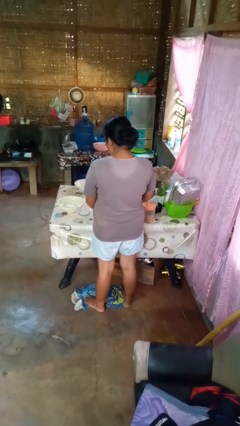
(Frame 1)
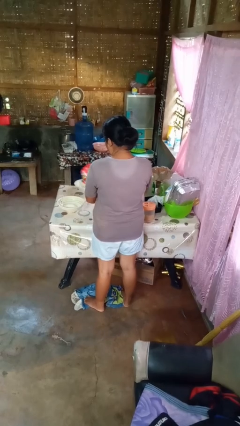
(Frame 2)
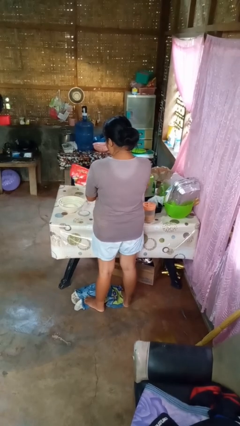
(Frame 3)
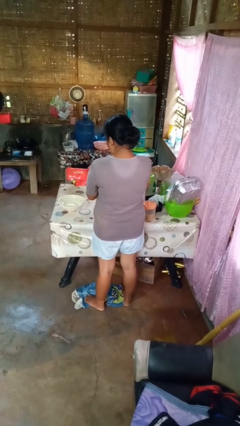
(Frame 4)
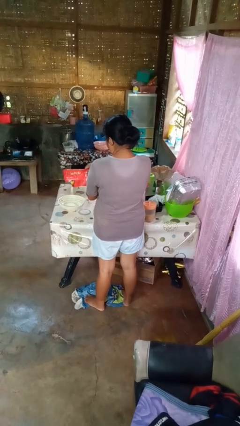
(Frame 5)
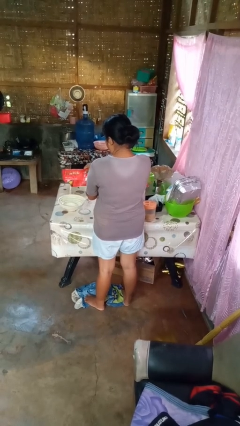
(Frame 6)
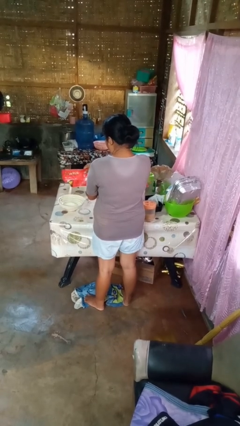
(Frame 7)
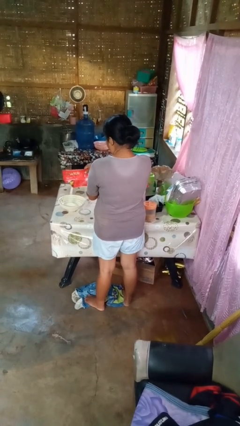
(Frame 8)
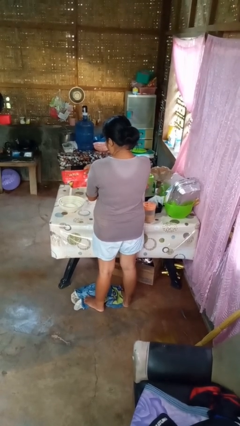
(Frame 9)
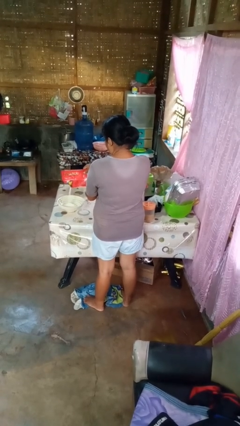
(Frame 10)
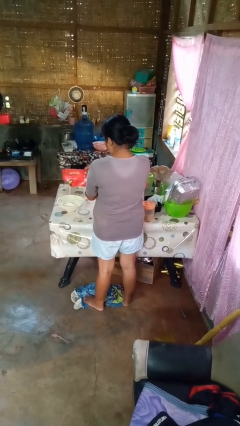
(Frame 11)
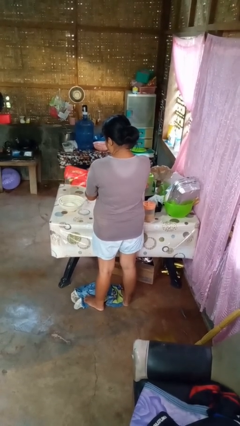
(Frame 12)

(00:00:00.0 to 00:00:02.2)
person pours into bowl

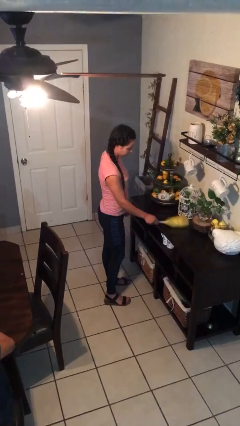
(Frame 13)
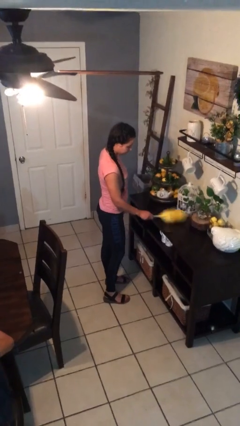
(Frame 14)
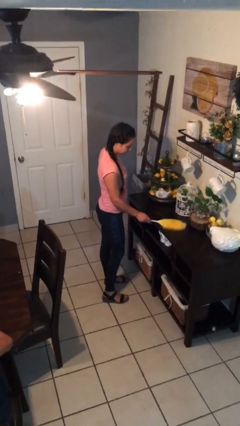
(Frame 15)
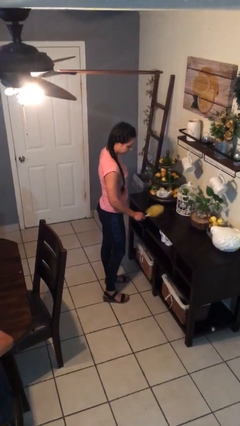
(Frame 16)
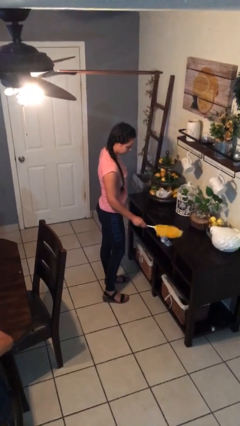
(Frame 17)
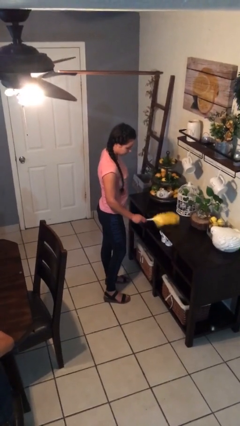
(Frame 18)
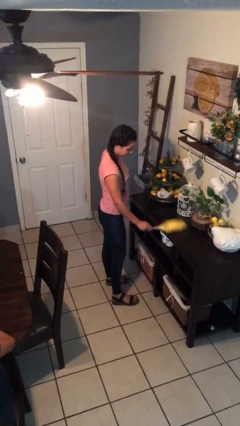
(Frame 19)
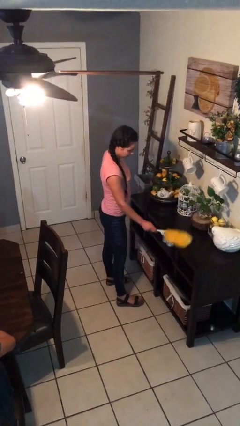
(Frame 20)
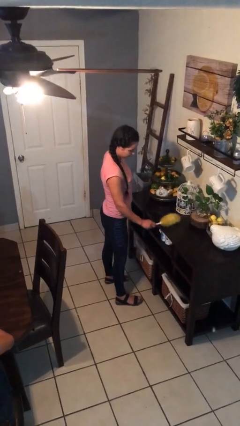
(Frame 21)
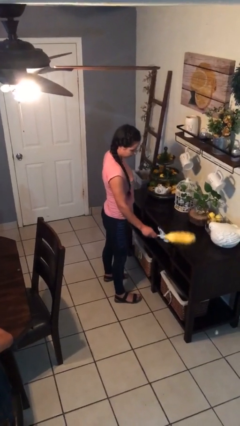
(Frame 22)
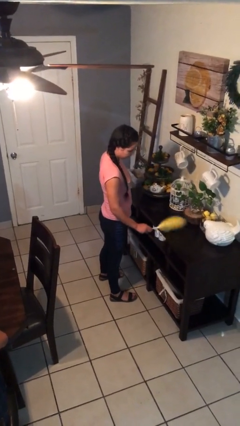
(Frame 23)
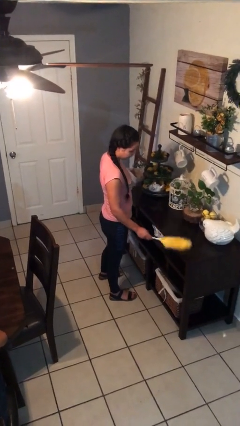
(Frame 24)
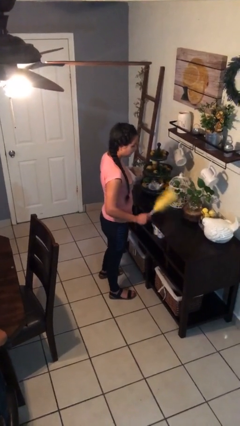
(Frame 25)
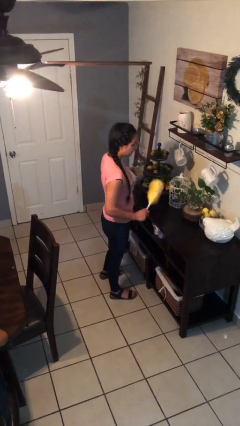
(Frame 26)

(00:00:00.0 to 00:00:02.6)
person dusts furniture

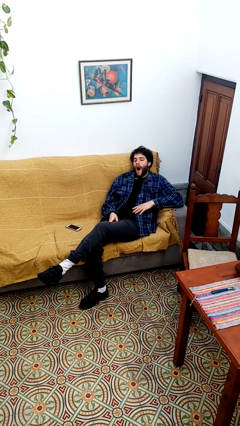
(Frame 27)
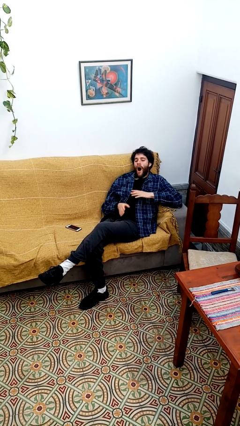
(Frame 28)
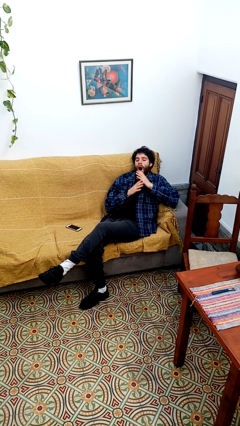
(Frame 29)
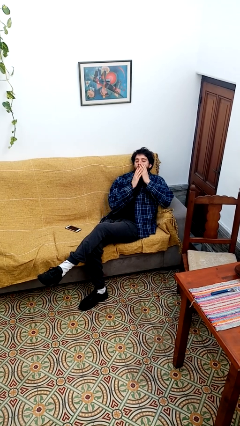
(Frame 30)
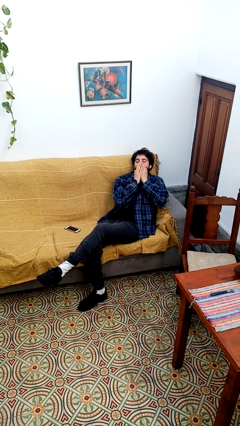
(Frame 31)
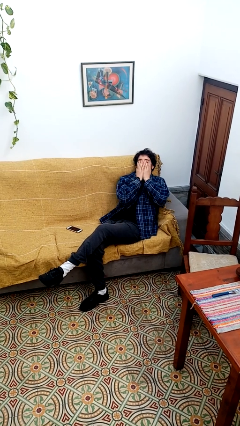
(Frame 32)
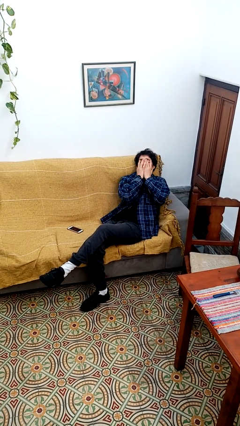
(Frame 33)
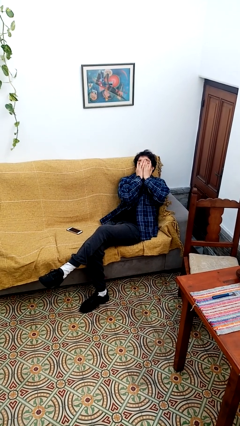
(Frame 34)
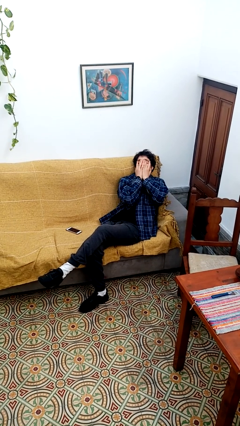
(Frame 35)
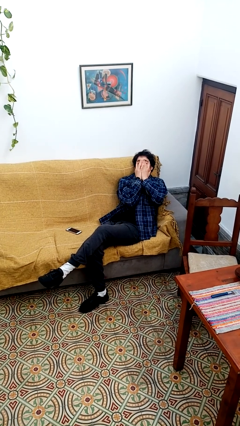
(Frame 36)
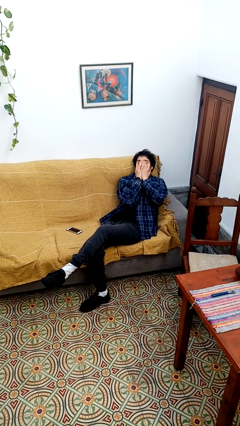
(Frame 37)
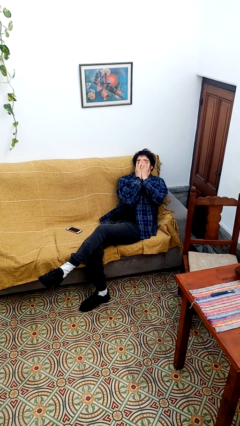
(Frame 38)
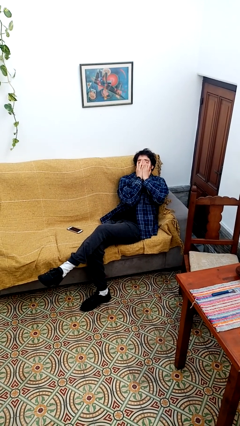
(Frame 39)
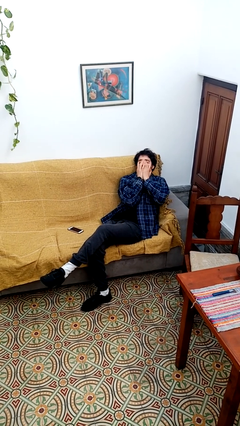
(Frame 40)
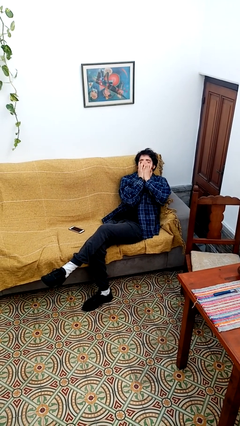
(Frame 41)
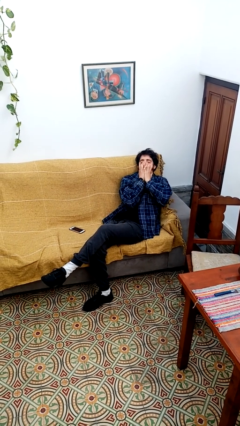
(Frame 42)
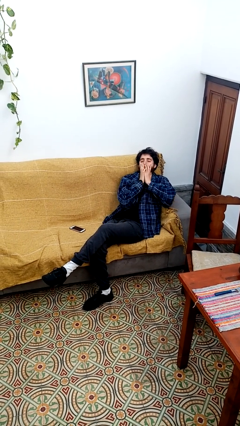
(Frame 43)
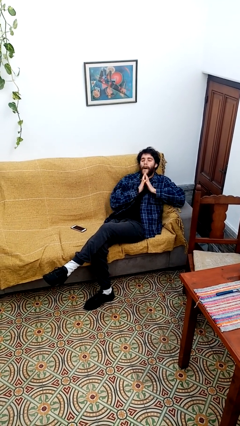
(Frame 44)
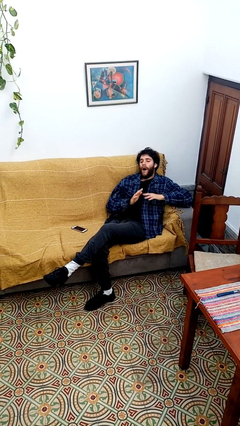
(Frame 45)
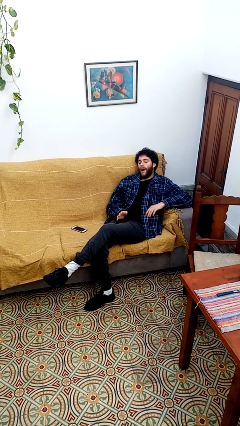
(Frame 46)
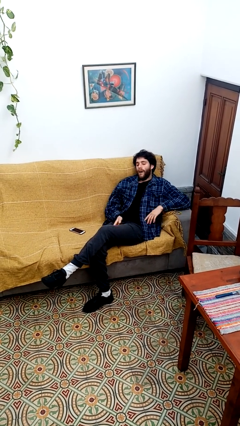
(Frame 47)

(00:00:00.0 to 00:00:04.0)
person yawns

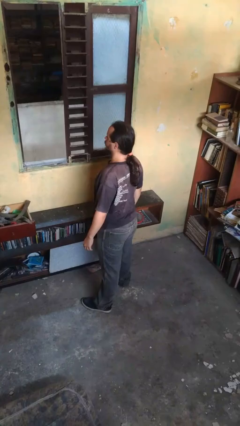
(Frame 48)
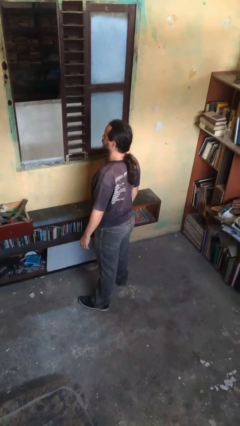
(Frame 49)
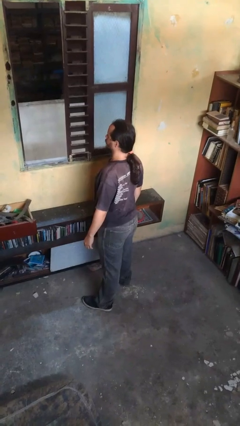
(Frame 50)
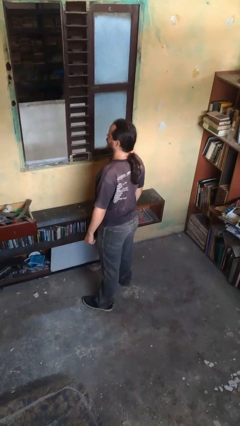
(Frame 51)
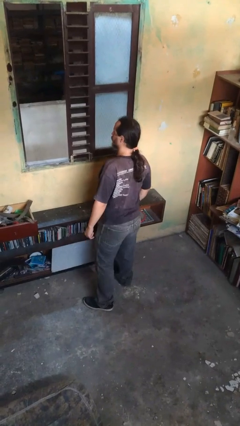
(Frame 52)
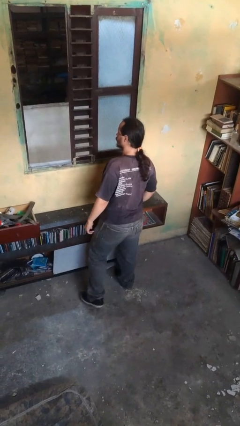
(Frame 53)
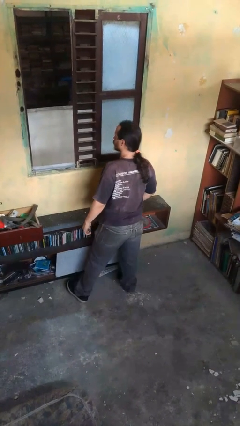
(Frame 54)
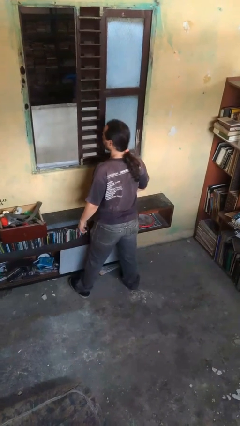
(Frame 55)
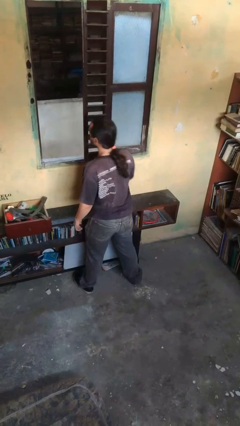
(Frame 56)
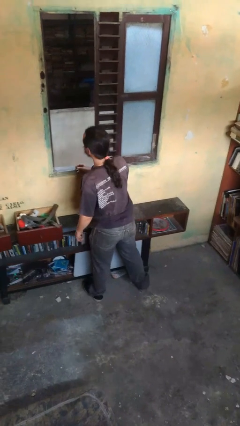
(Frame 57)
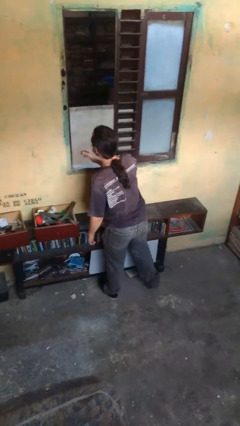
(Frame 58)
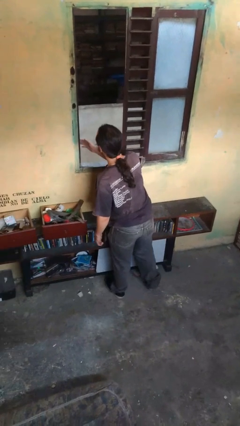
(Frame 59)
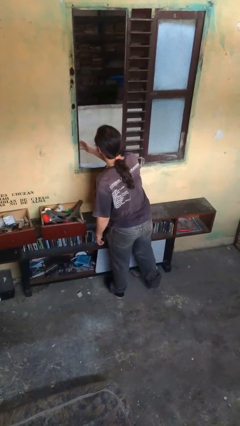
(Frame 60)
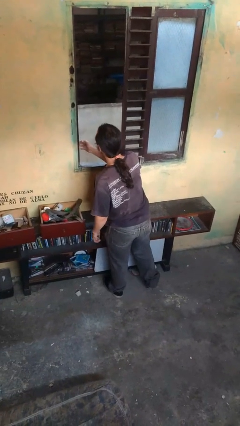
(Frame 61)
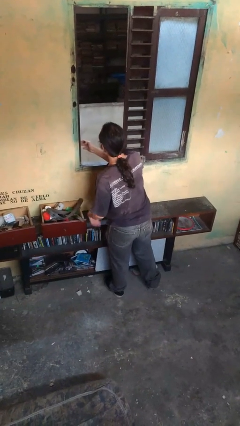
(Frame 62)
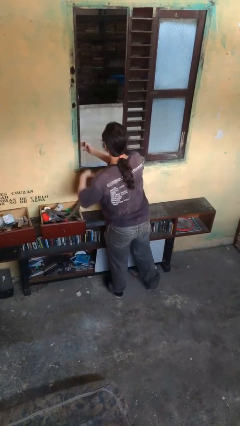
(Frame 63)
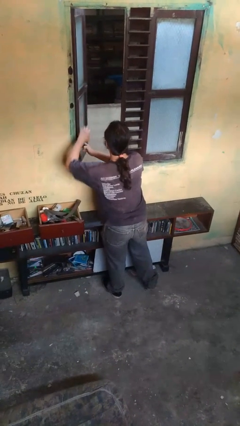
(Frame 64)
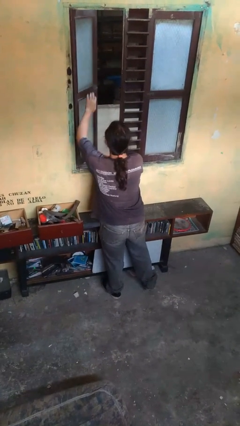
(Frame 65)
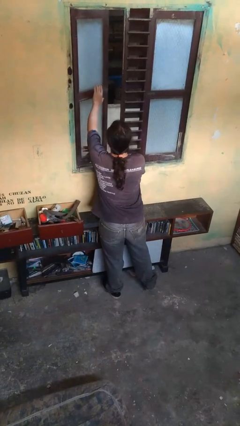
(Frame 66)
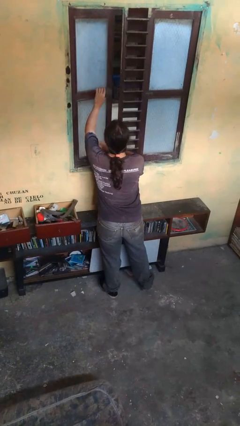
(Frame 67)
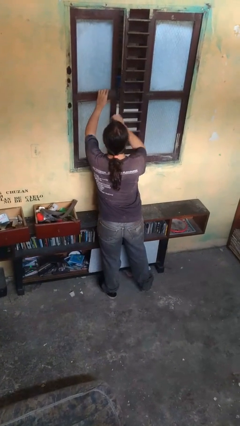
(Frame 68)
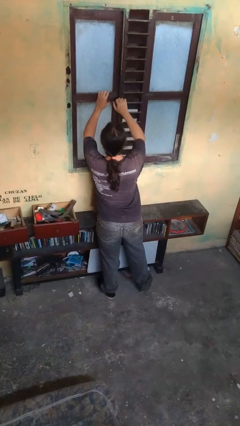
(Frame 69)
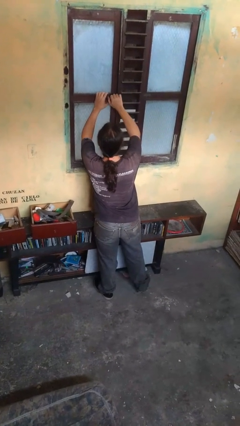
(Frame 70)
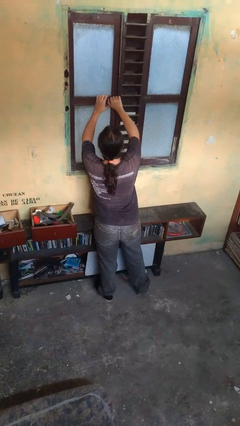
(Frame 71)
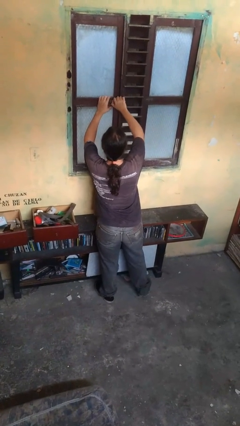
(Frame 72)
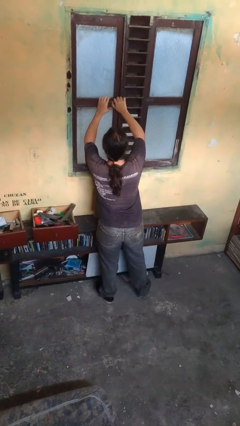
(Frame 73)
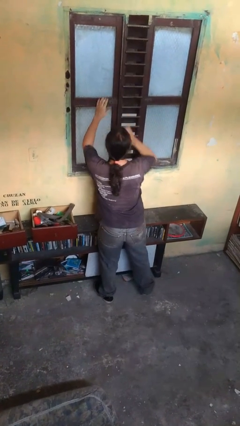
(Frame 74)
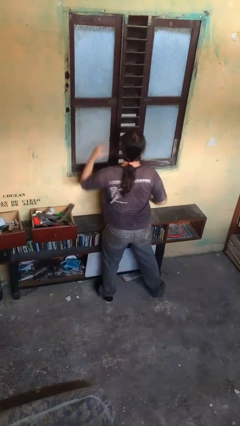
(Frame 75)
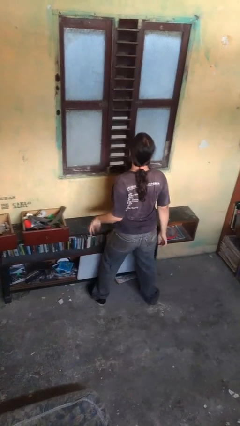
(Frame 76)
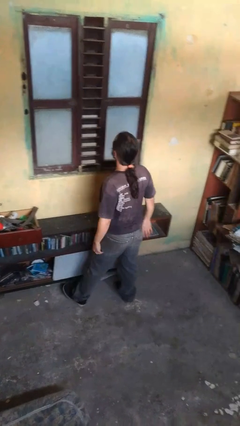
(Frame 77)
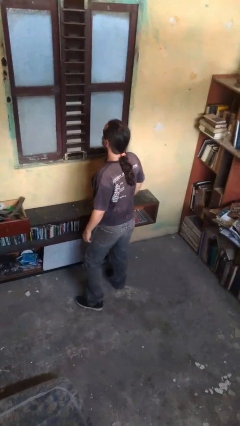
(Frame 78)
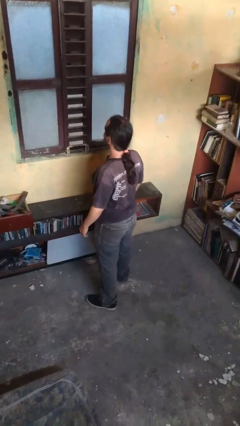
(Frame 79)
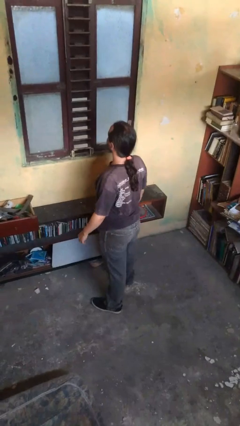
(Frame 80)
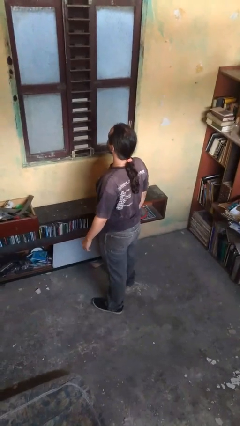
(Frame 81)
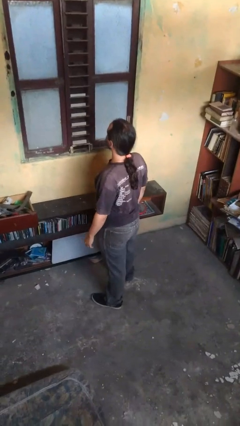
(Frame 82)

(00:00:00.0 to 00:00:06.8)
person closes home window

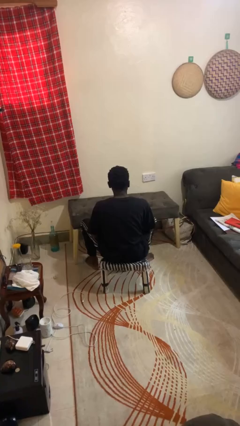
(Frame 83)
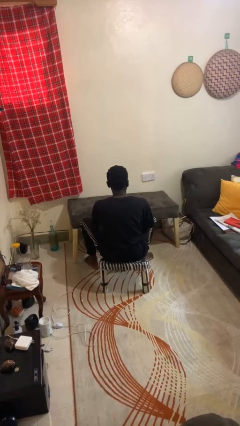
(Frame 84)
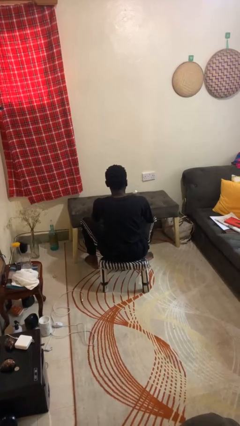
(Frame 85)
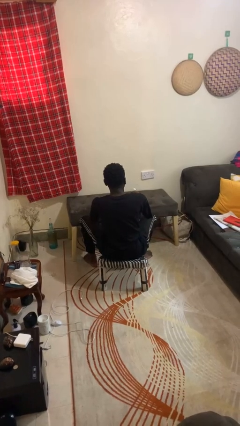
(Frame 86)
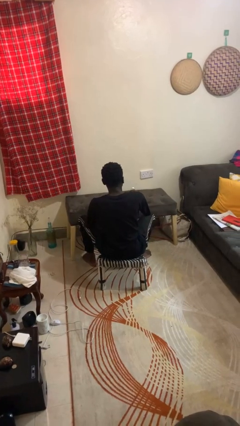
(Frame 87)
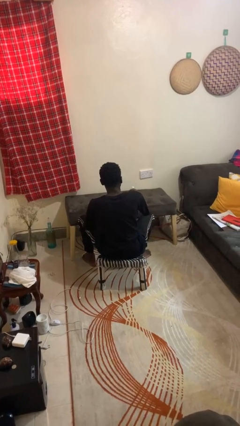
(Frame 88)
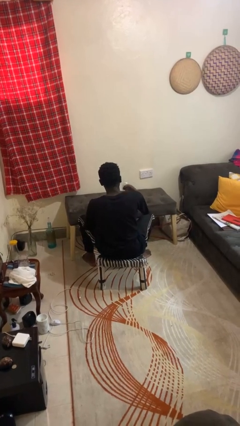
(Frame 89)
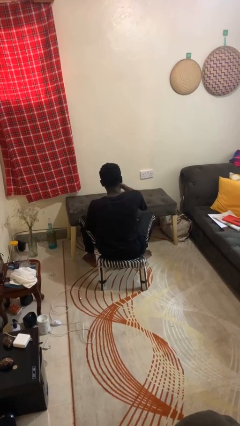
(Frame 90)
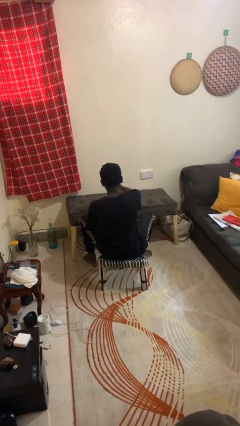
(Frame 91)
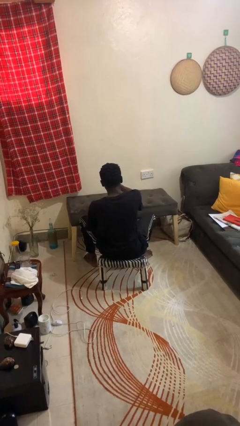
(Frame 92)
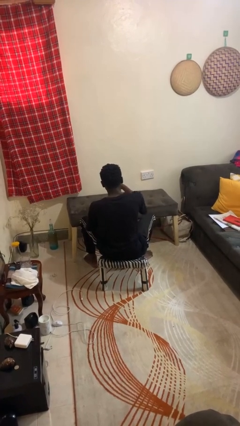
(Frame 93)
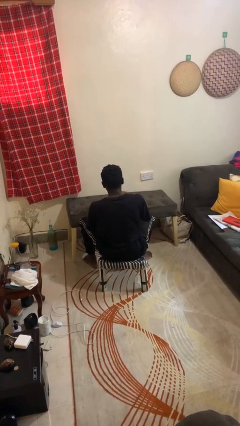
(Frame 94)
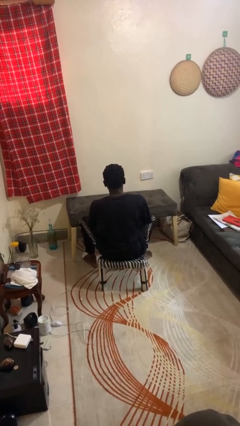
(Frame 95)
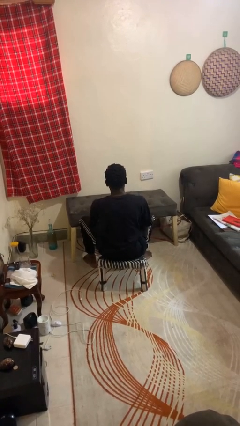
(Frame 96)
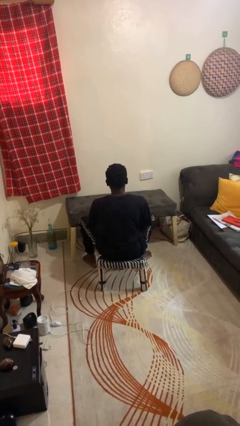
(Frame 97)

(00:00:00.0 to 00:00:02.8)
person sprays from bottle
